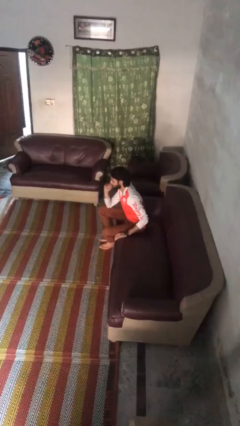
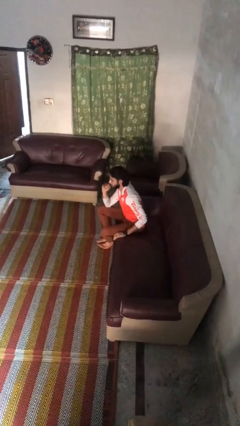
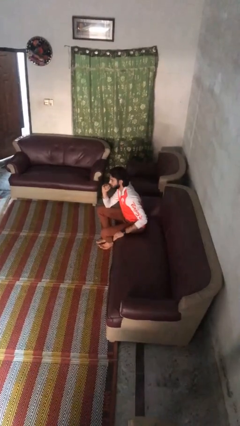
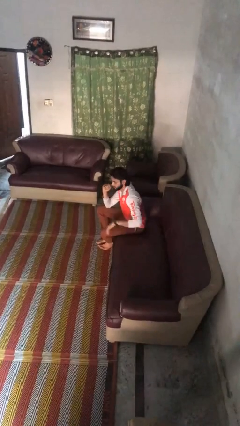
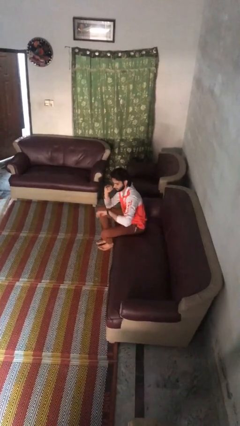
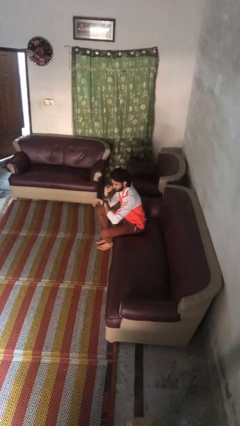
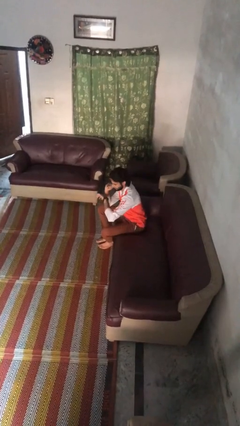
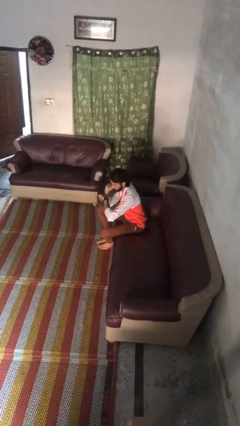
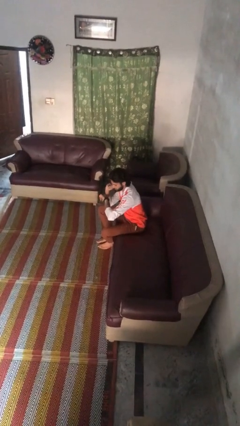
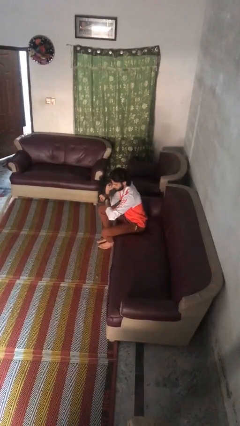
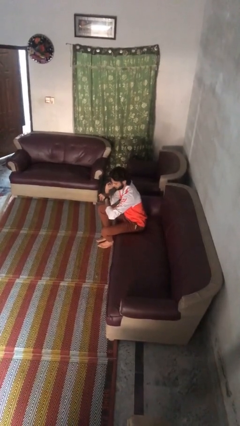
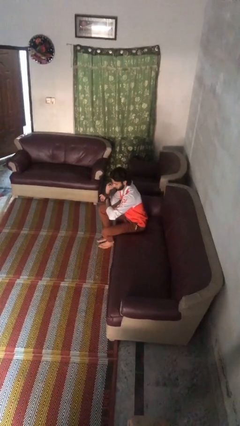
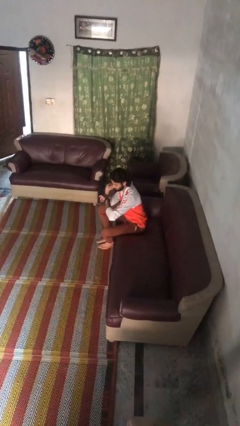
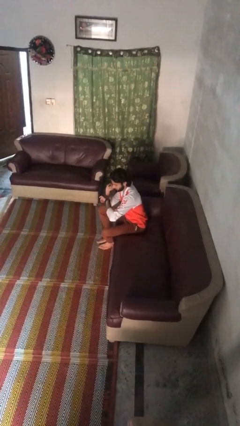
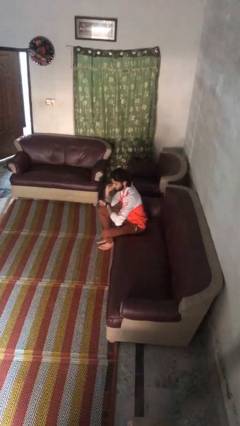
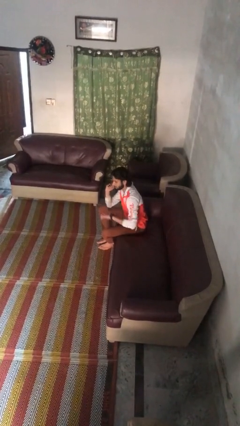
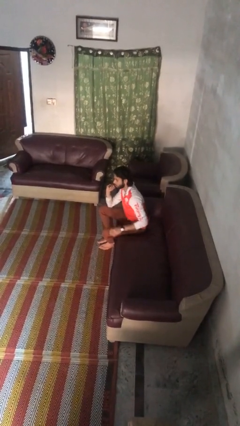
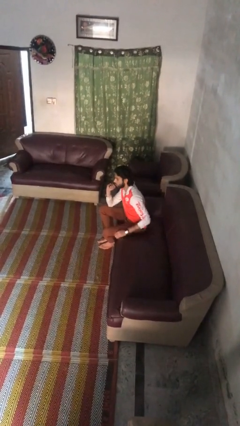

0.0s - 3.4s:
person looks at wristwatch

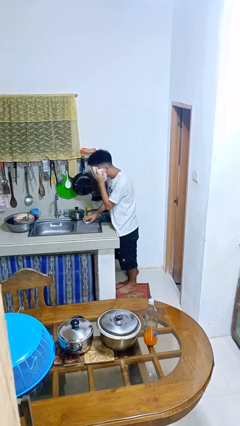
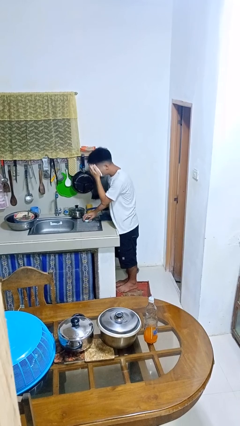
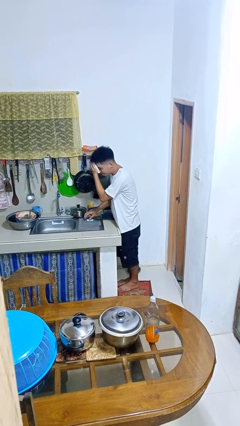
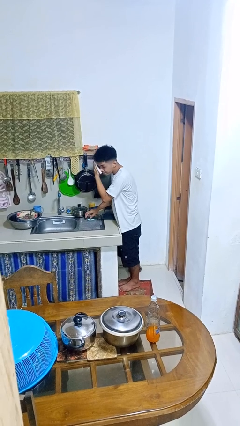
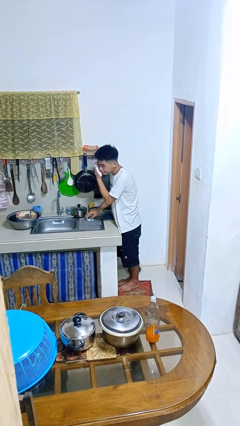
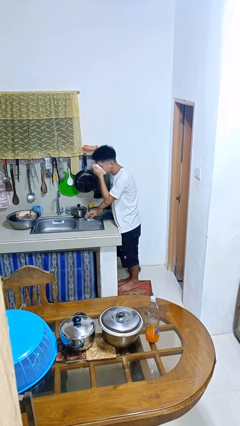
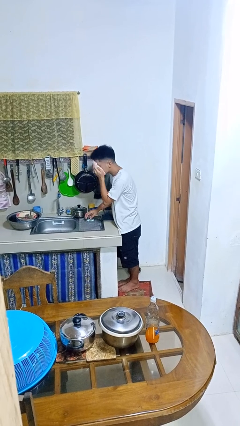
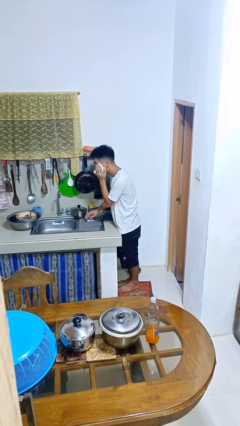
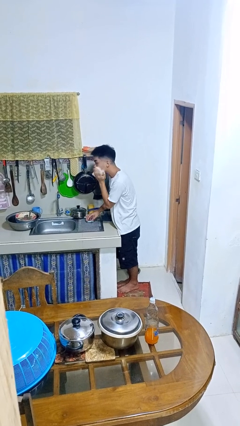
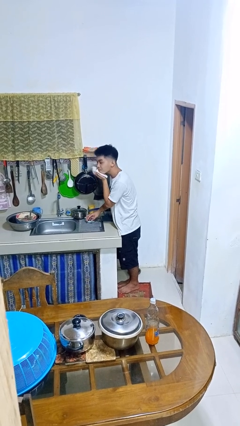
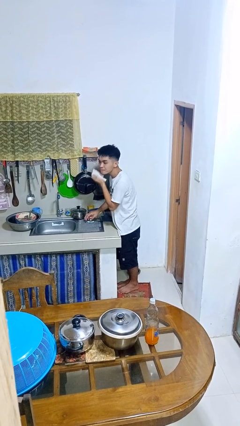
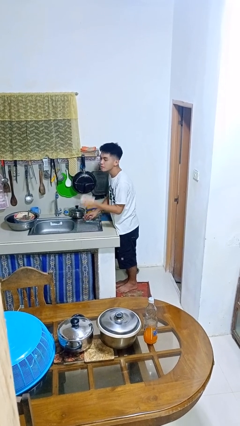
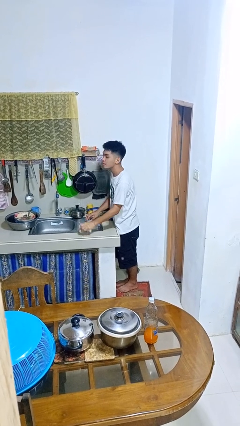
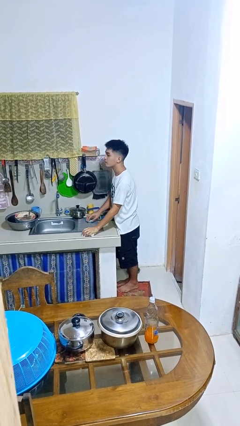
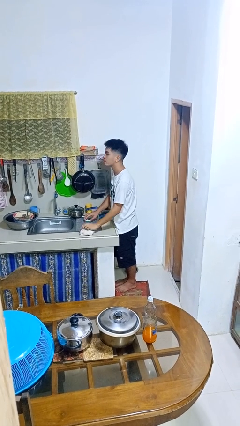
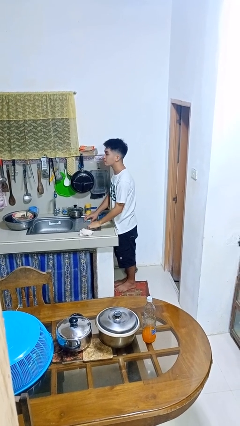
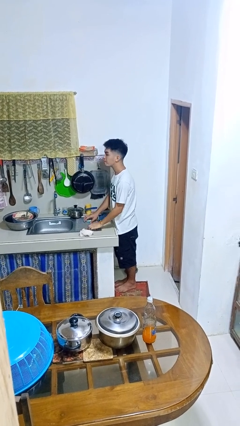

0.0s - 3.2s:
person dries face with towel

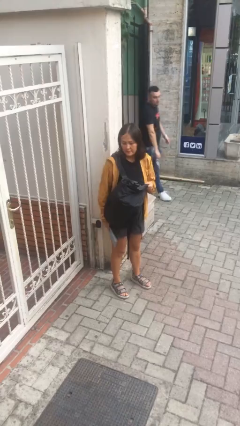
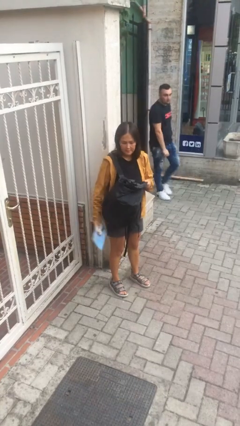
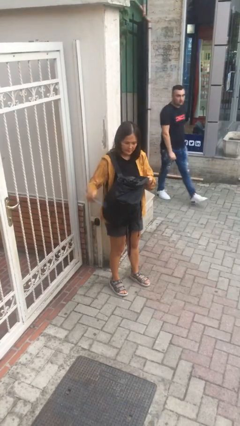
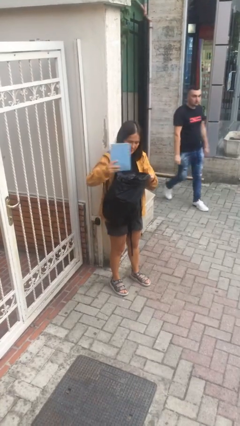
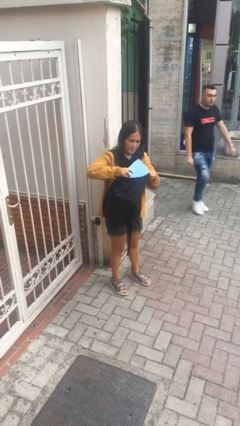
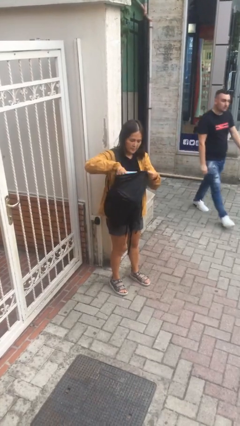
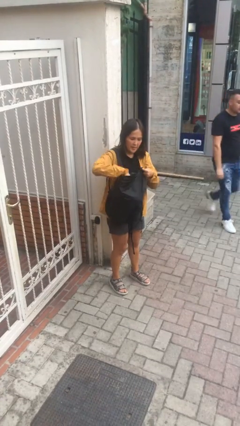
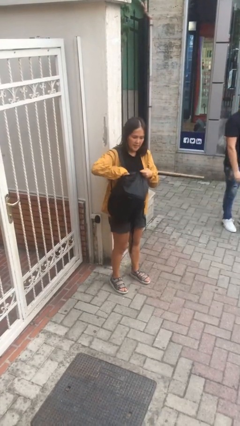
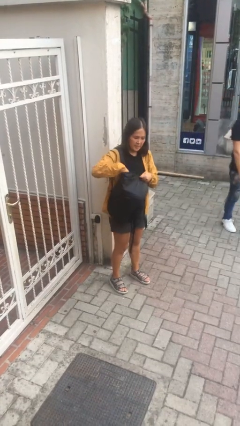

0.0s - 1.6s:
person puts object into backpack

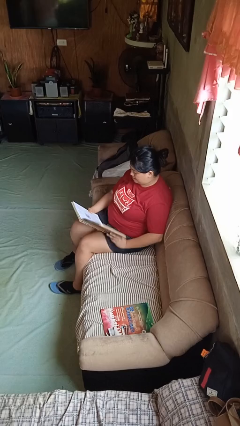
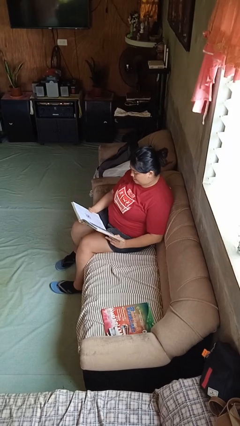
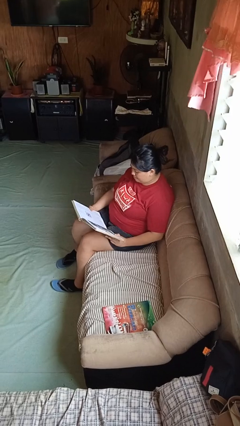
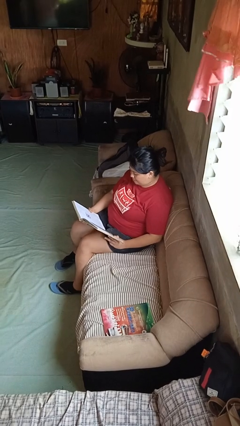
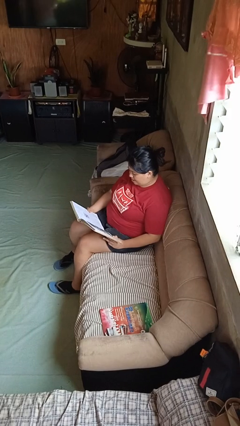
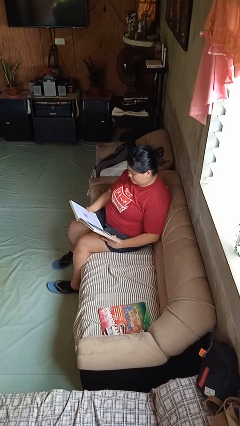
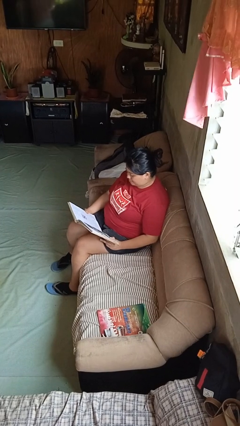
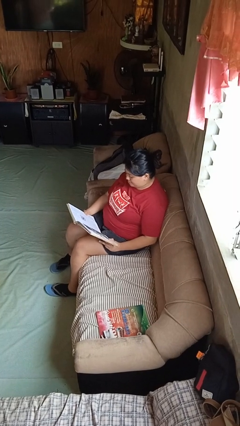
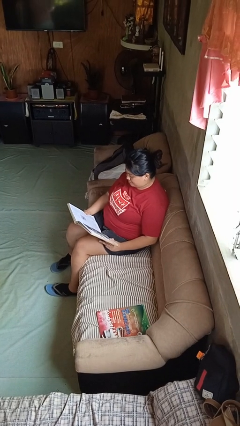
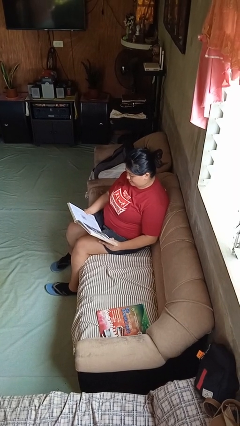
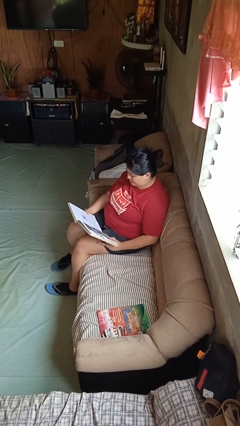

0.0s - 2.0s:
person reads book

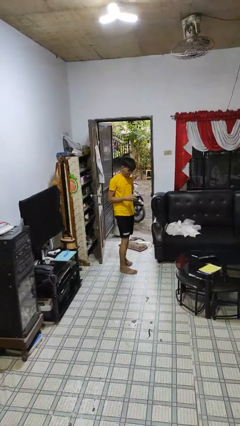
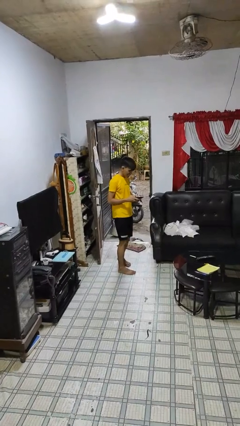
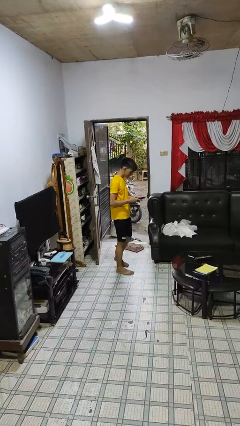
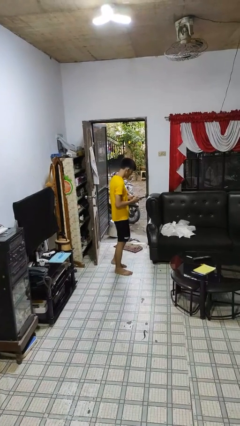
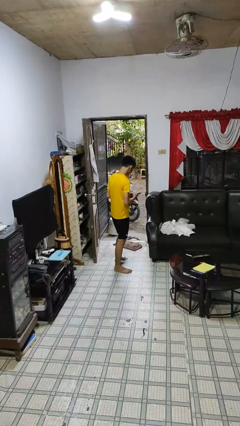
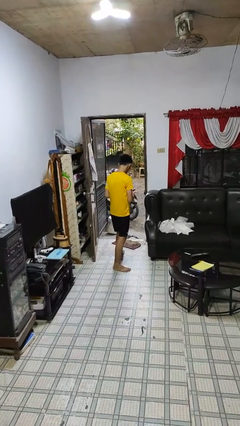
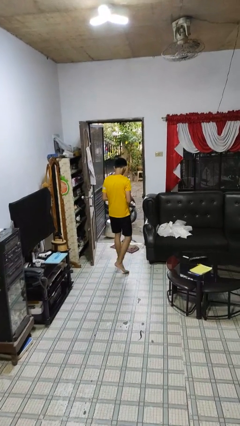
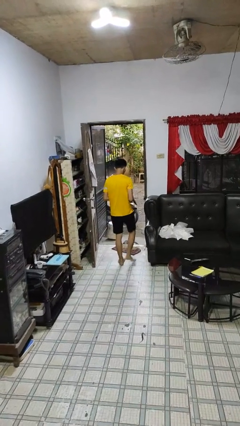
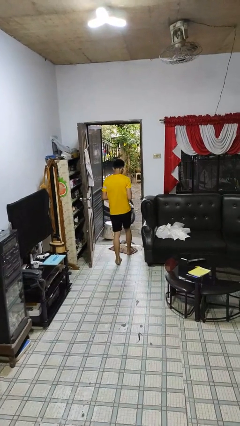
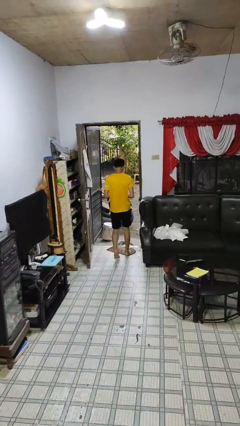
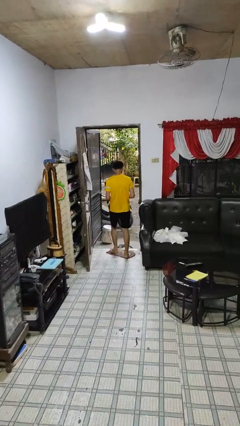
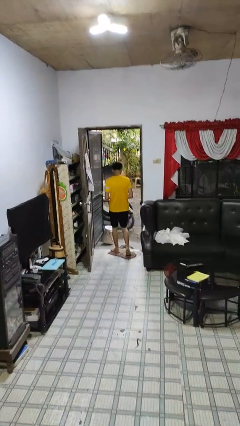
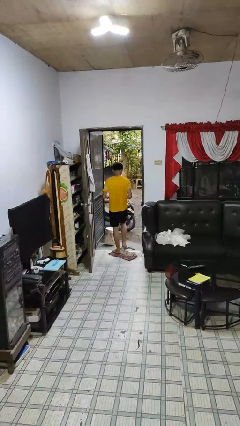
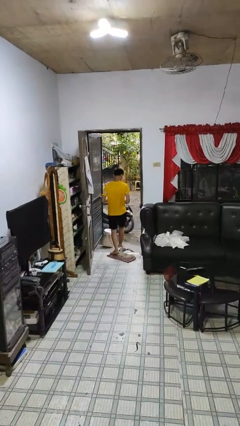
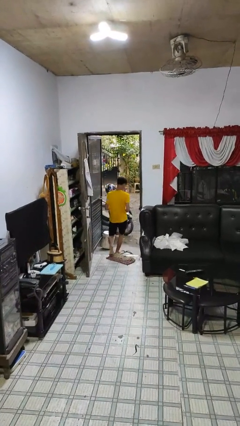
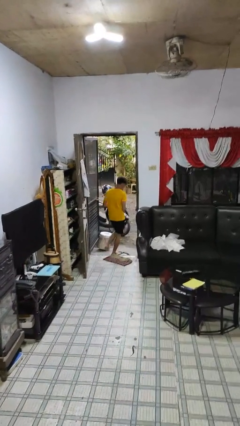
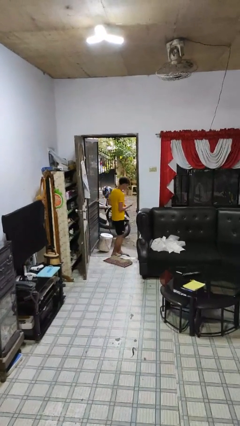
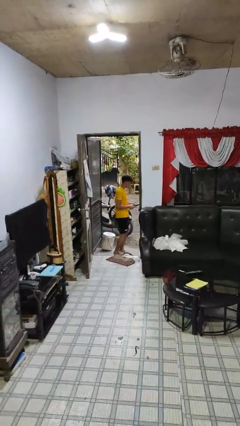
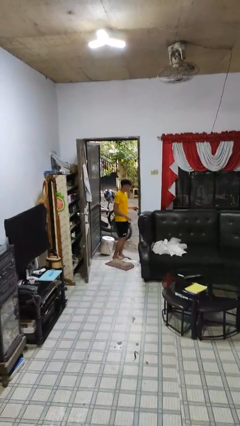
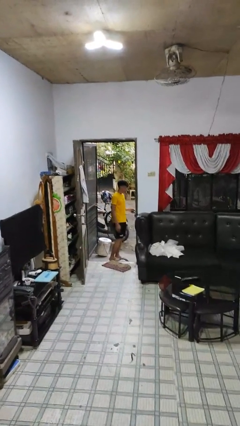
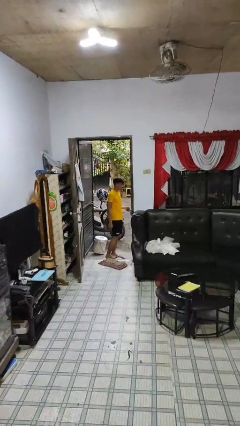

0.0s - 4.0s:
person exits scene through structure

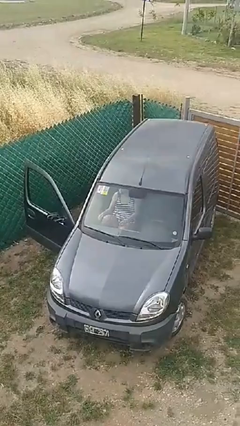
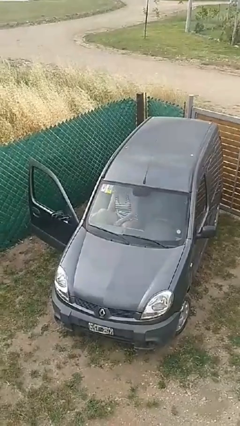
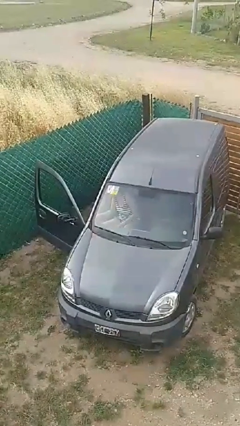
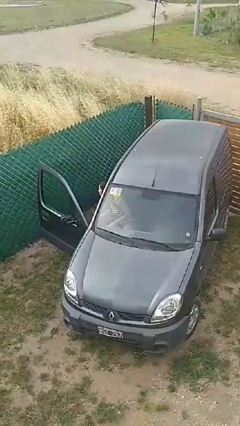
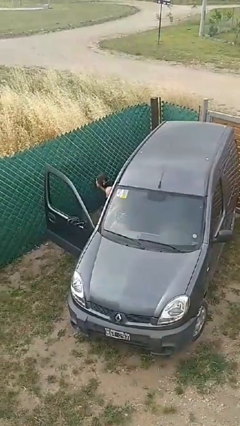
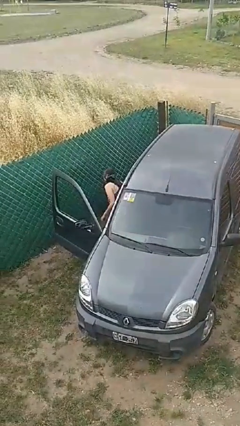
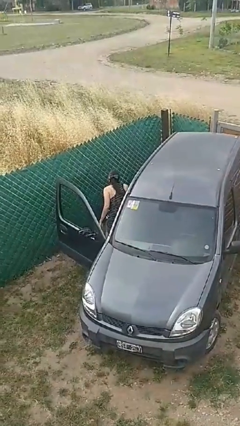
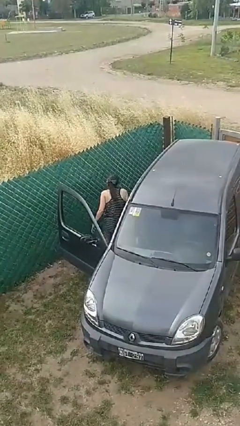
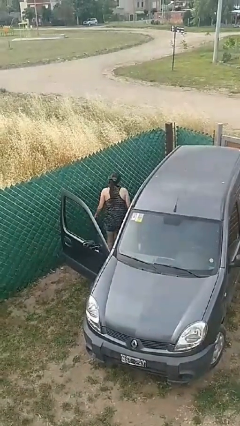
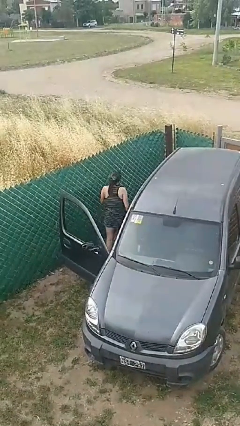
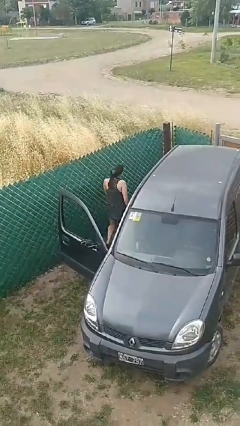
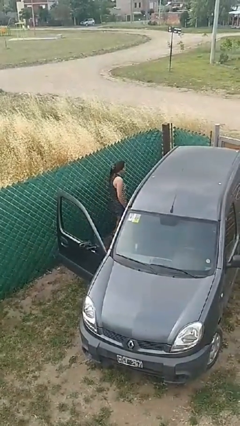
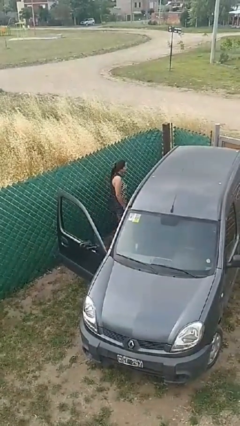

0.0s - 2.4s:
person exits car

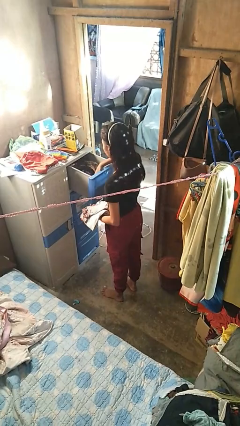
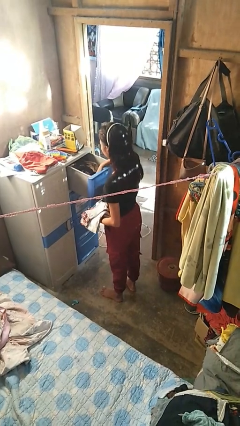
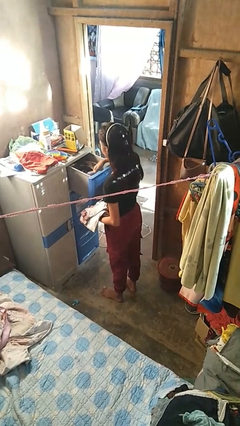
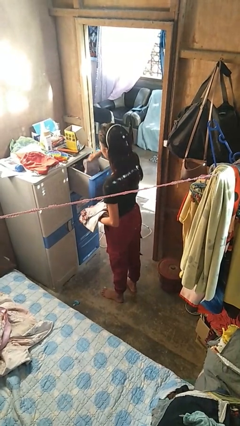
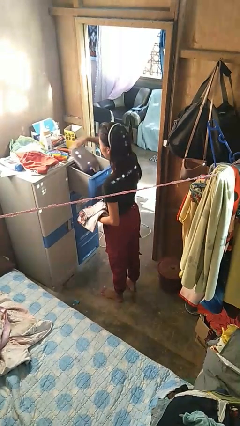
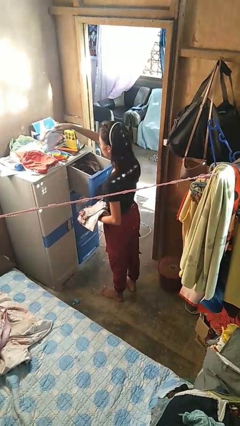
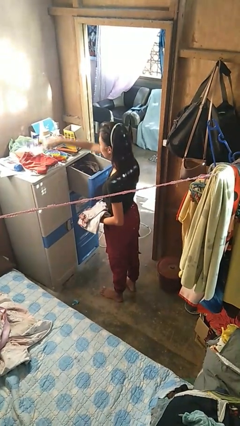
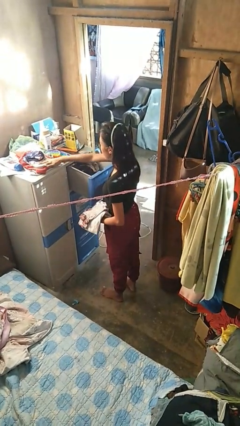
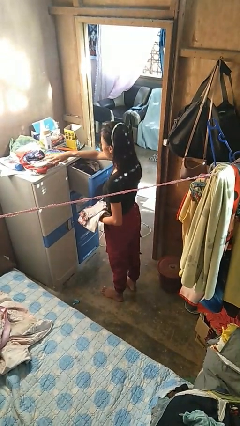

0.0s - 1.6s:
person takes clothes from dresser
